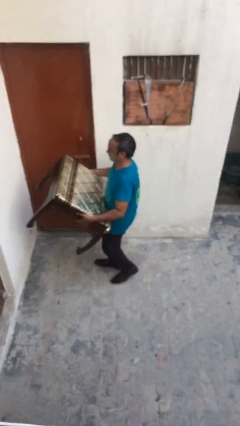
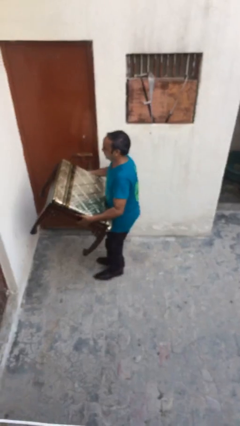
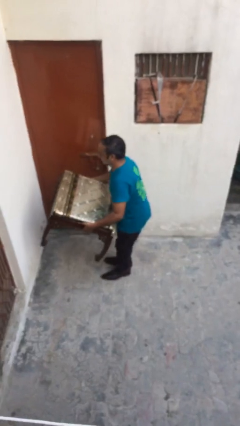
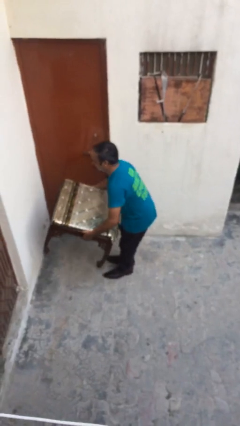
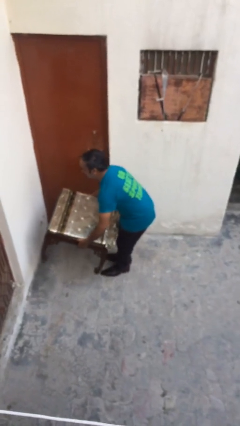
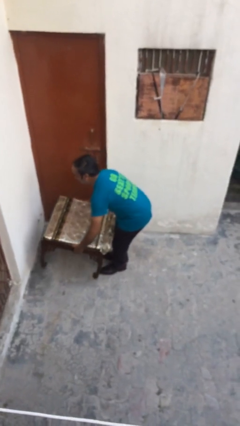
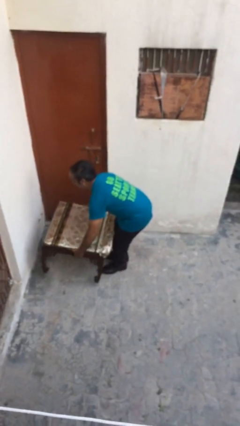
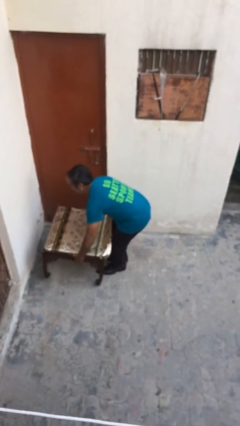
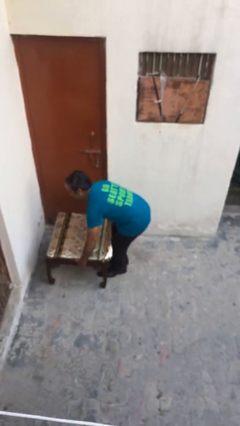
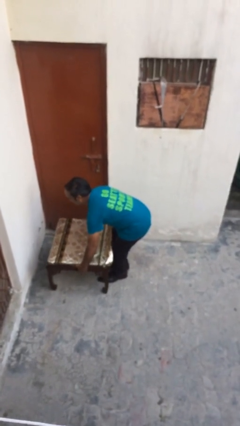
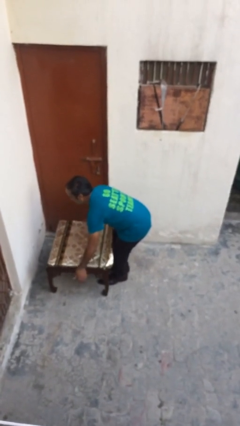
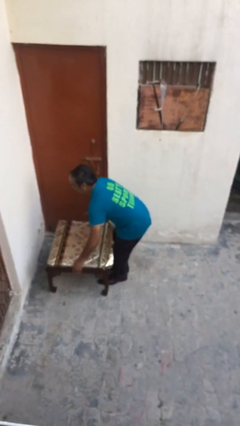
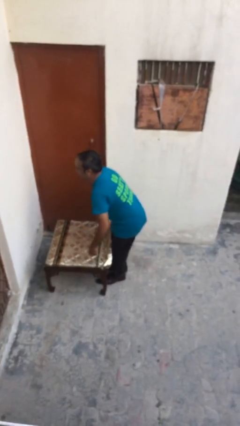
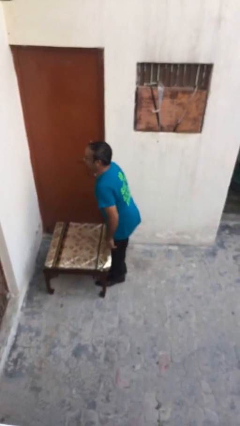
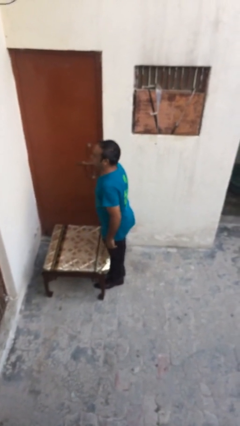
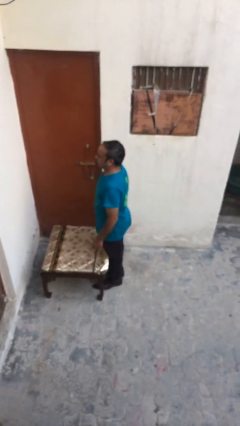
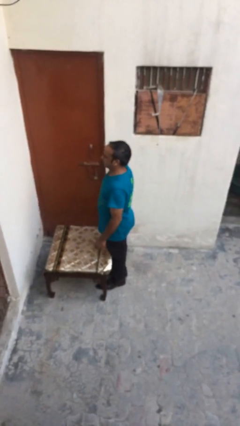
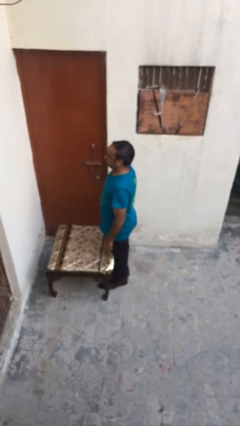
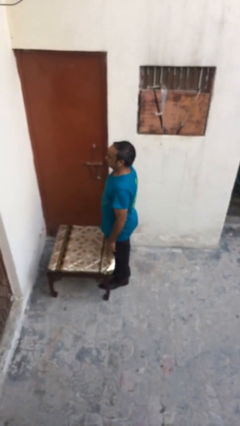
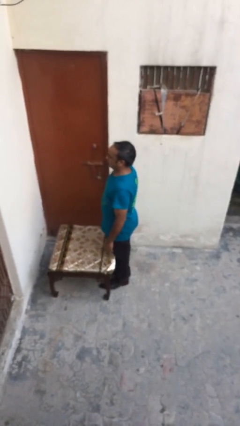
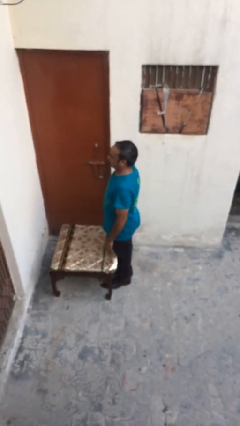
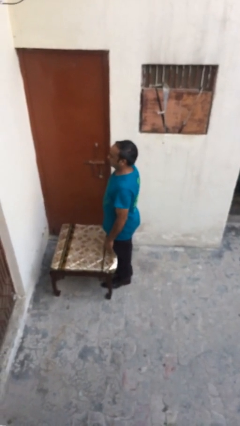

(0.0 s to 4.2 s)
person puts down object on floor

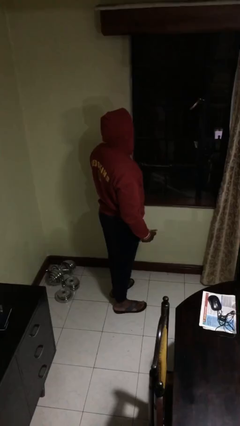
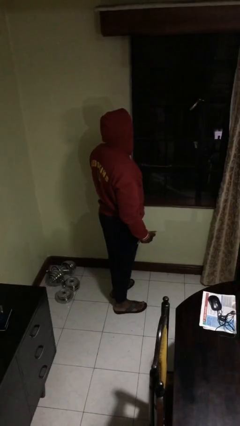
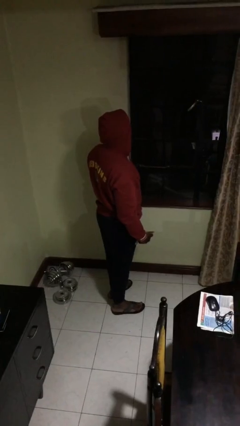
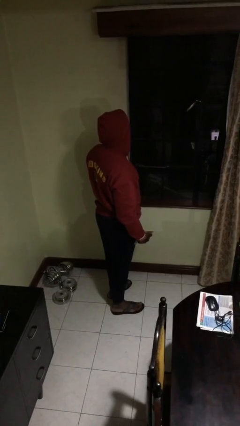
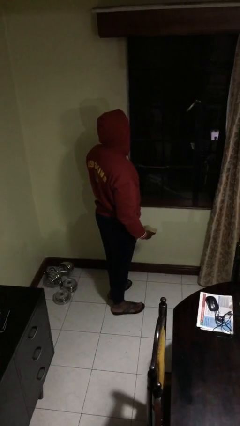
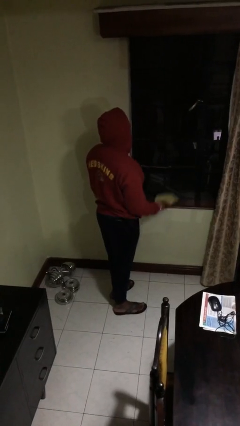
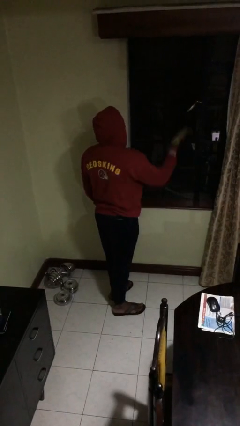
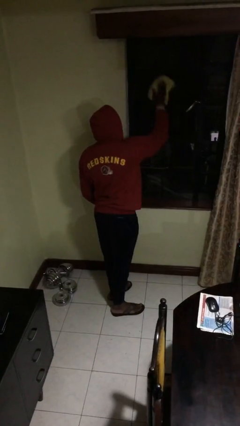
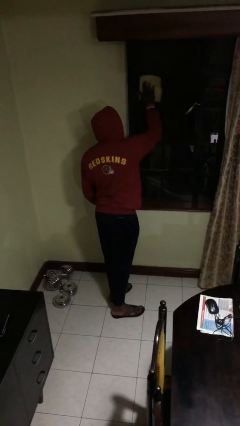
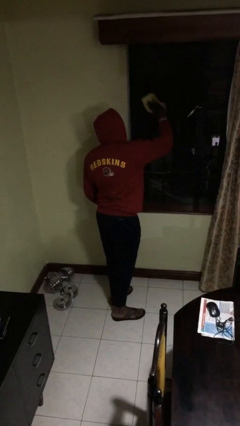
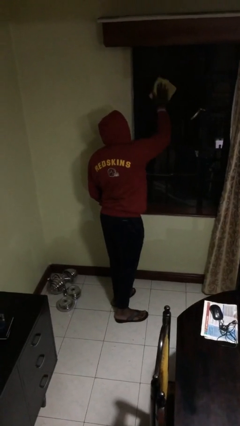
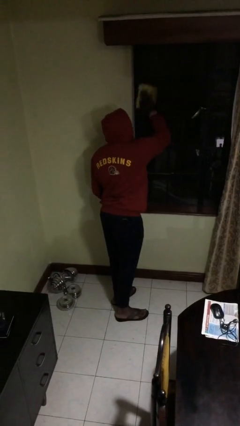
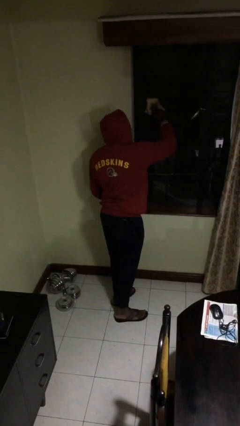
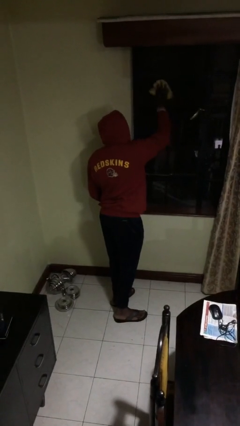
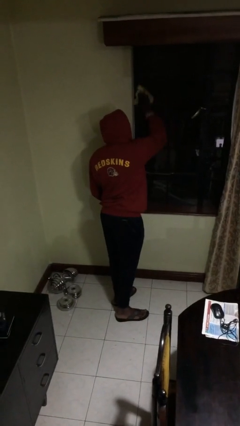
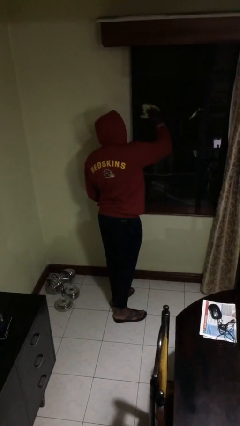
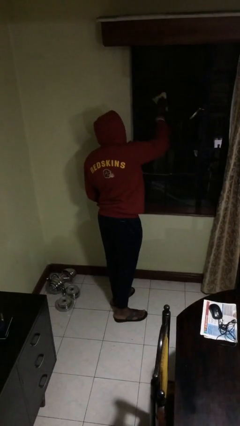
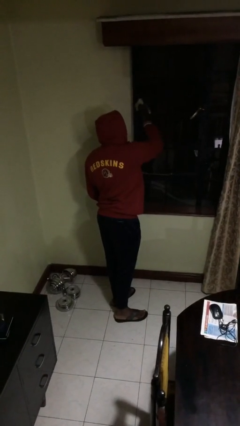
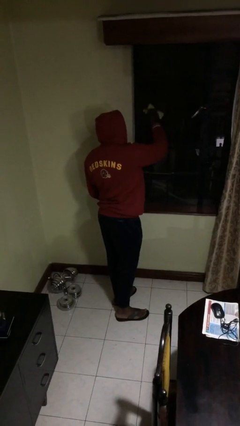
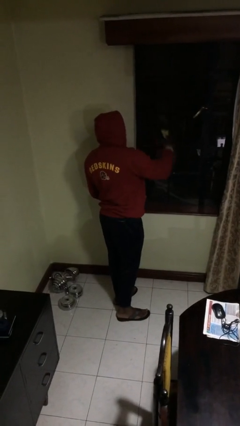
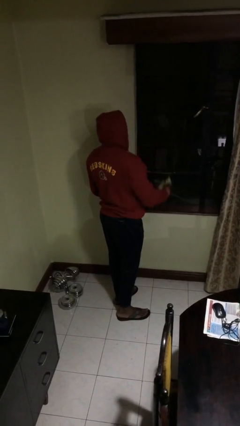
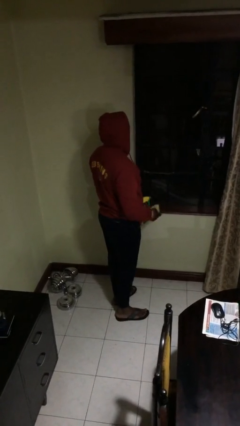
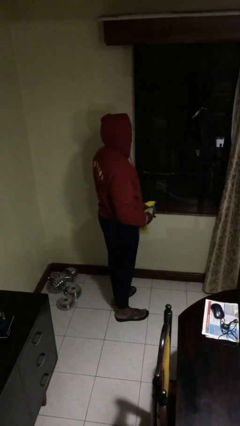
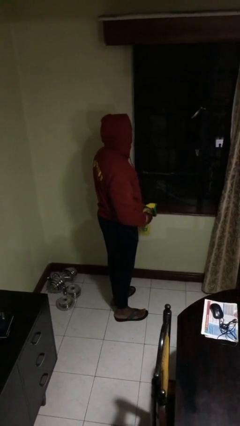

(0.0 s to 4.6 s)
person washes window

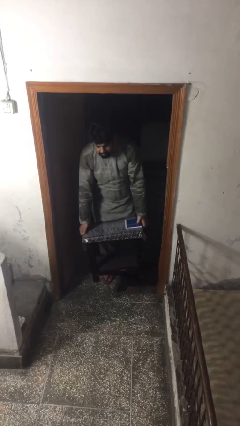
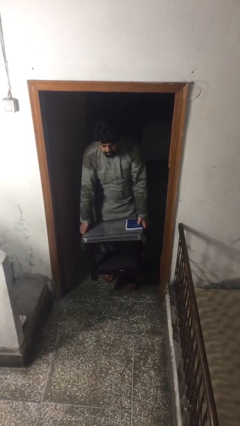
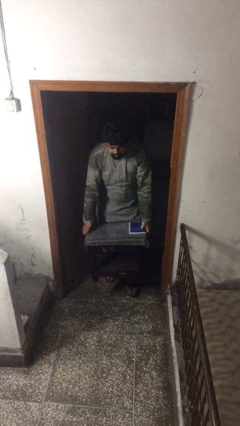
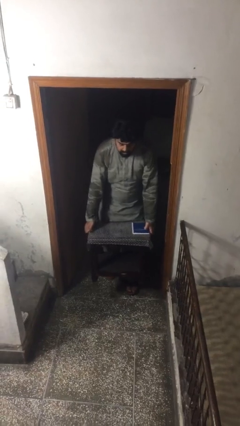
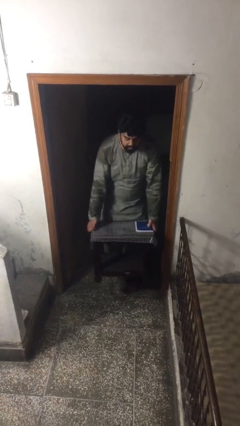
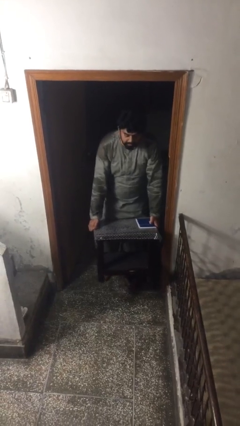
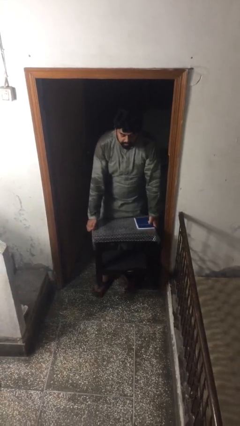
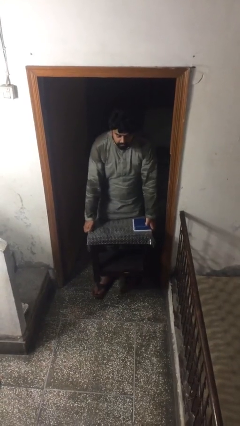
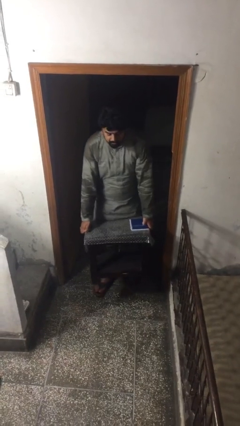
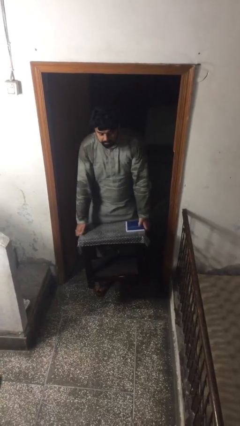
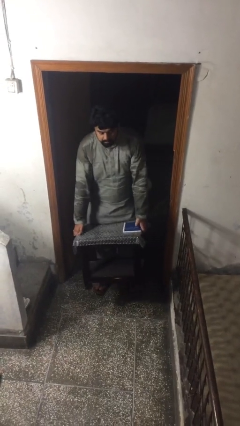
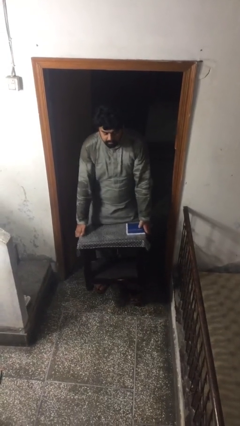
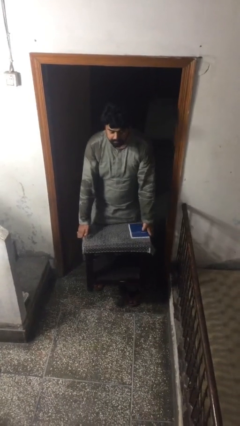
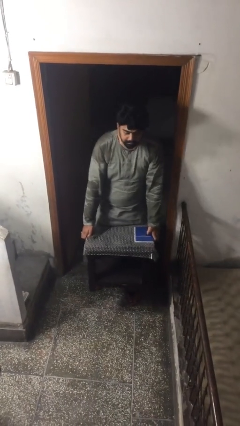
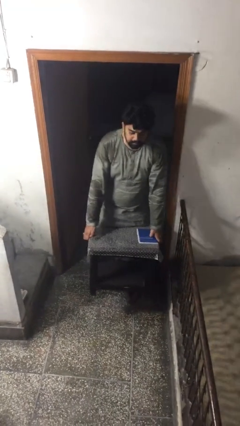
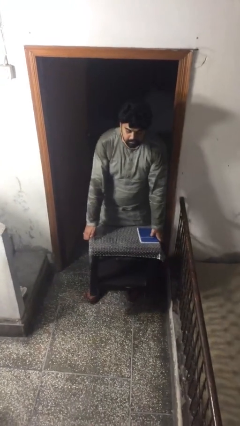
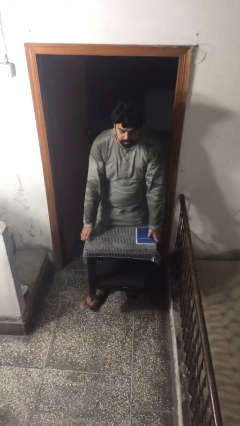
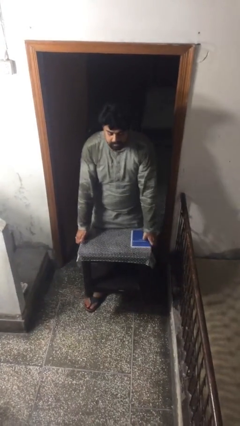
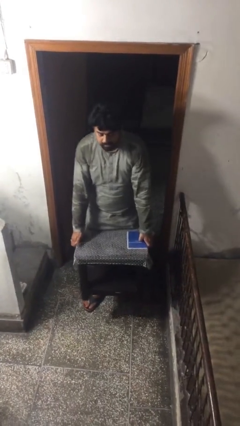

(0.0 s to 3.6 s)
person carries heavy object

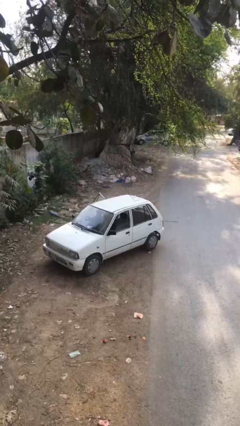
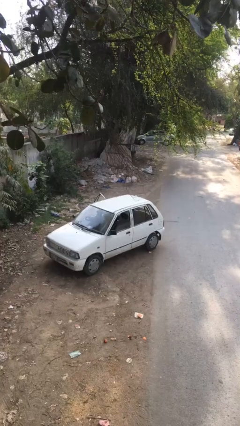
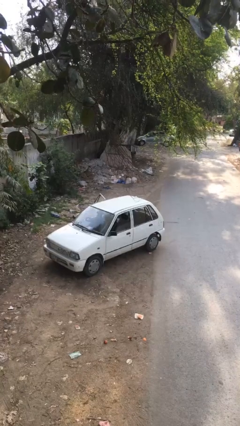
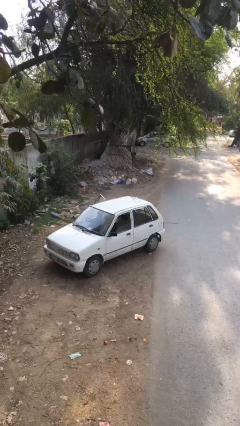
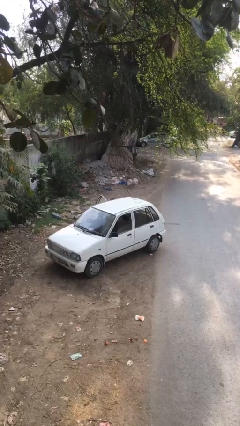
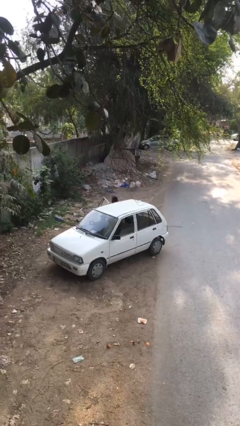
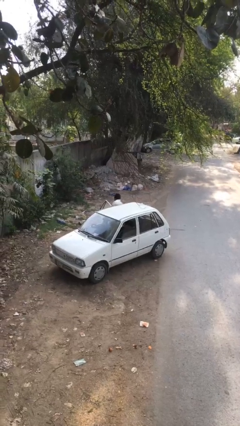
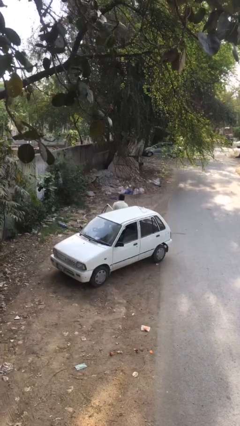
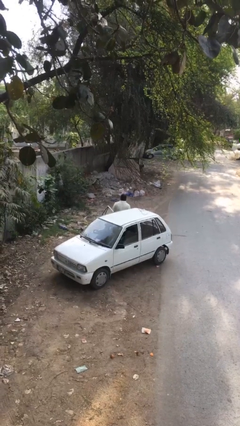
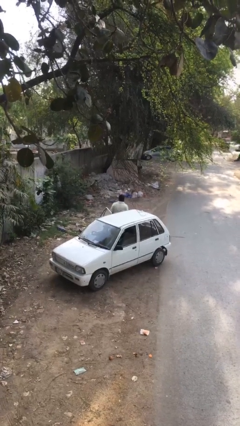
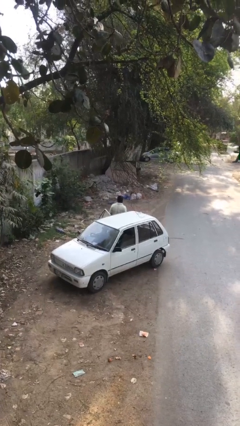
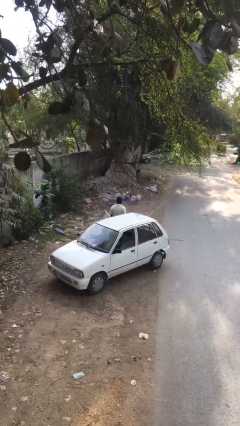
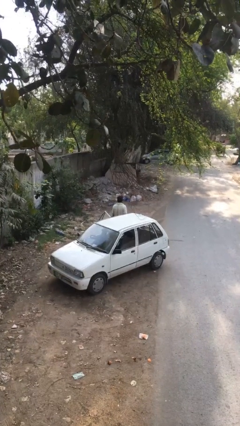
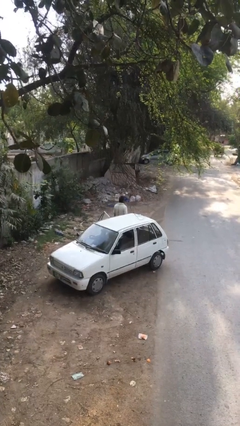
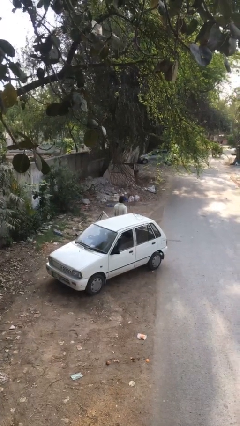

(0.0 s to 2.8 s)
person exits car

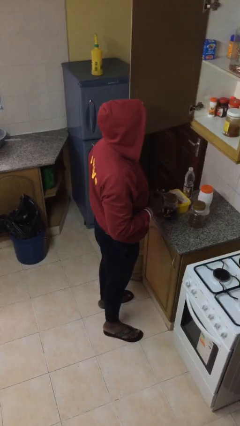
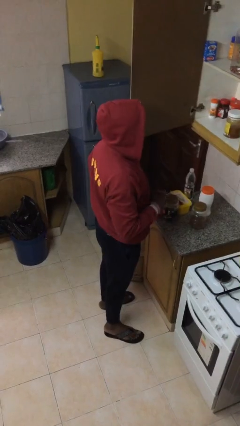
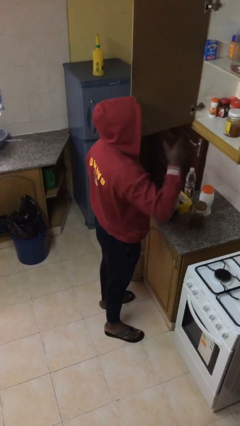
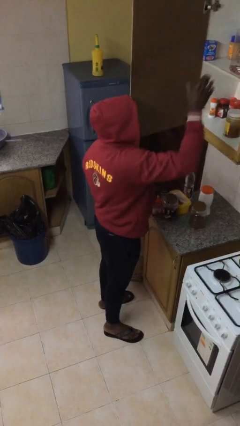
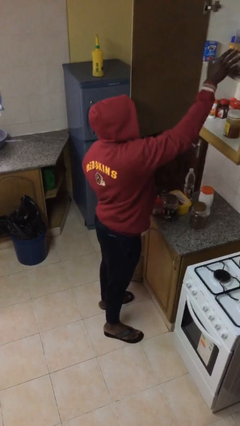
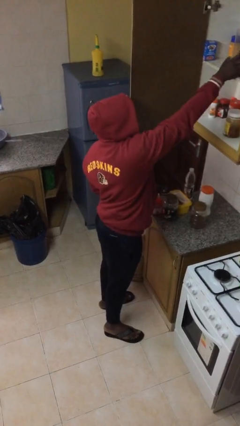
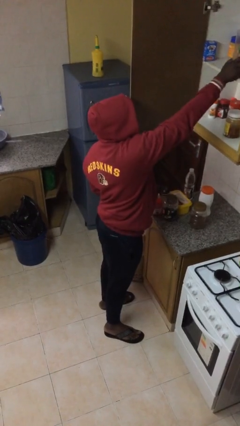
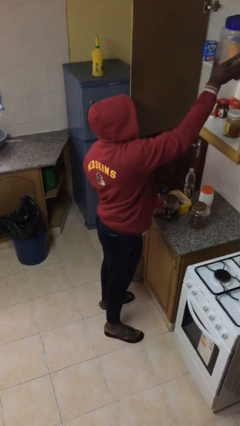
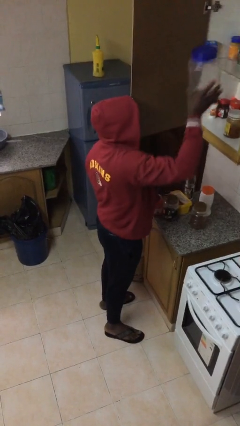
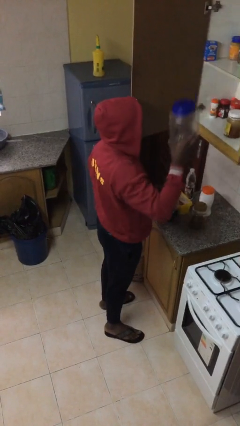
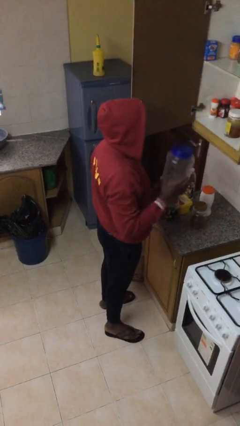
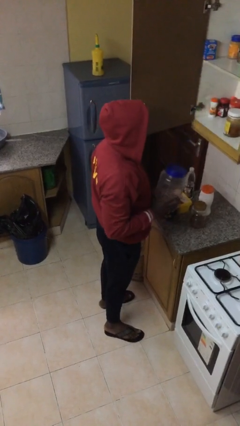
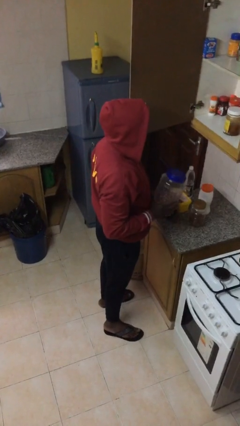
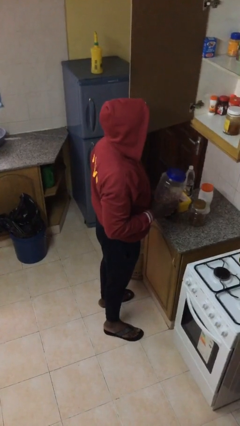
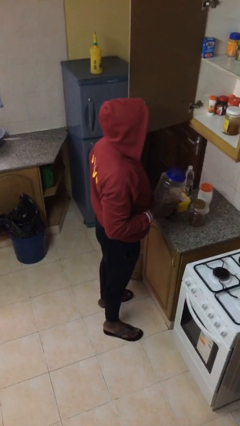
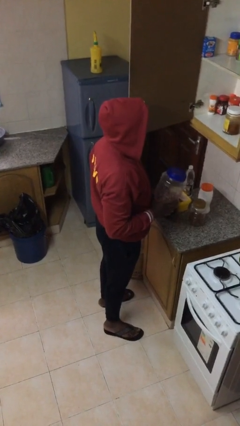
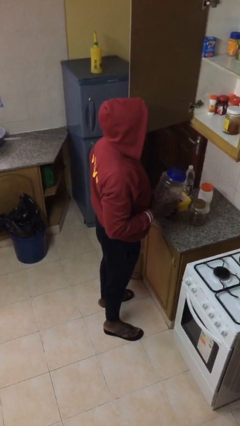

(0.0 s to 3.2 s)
person picks up object from shelf
